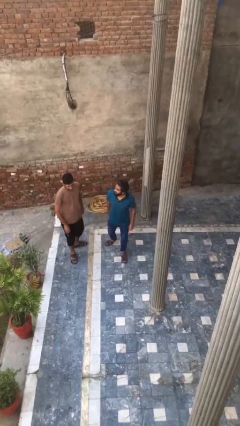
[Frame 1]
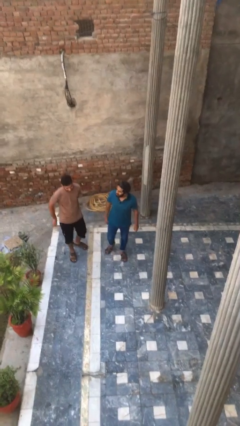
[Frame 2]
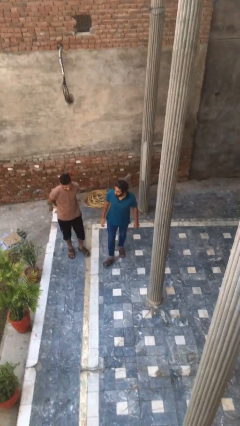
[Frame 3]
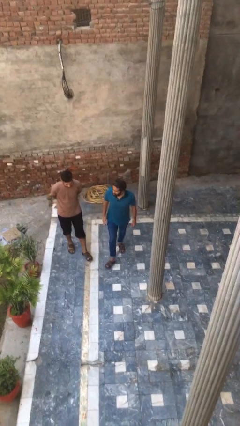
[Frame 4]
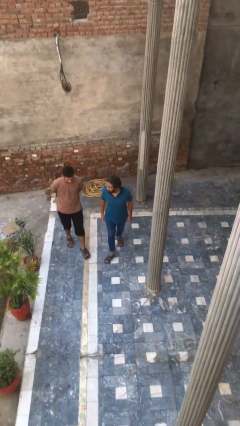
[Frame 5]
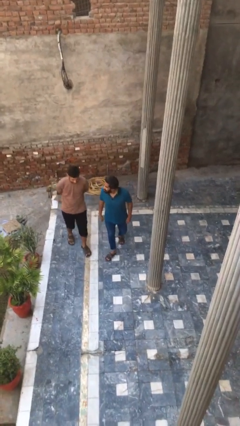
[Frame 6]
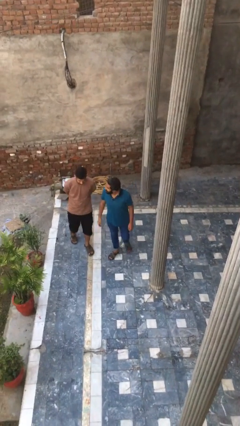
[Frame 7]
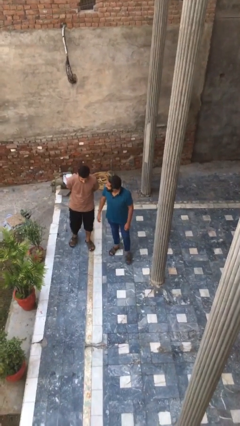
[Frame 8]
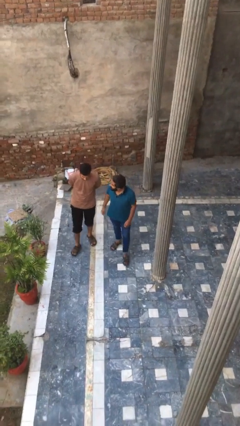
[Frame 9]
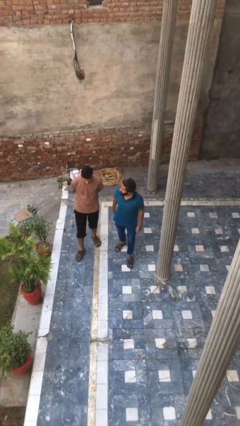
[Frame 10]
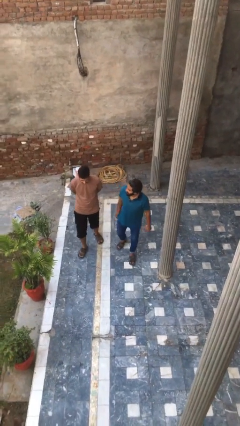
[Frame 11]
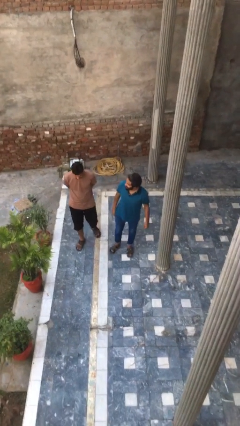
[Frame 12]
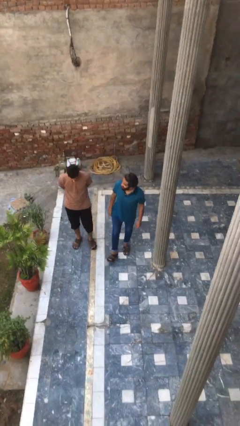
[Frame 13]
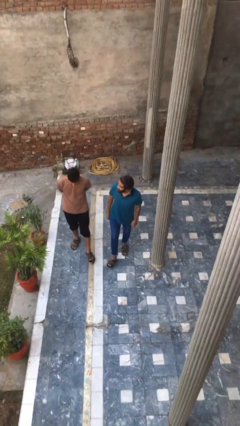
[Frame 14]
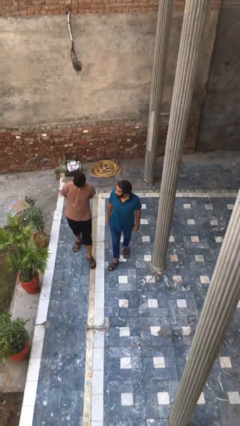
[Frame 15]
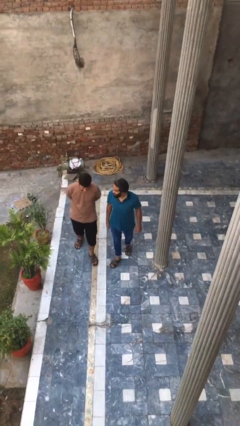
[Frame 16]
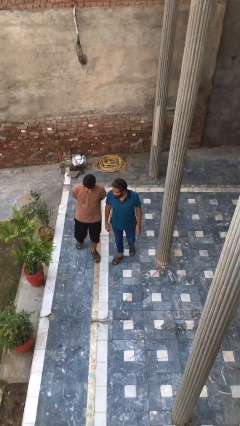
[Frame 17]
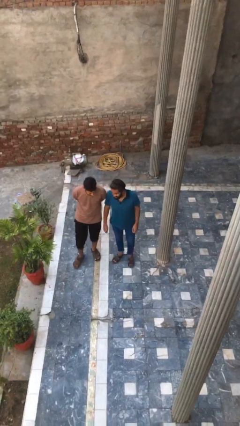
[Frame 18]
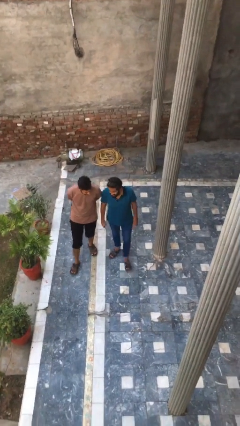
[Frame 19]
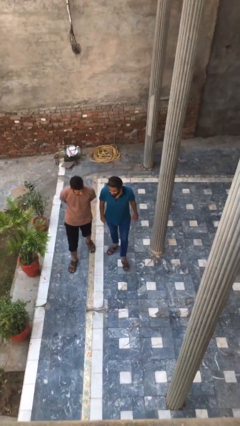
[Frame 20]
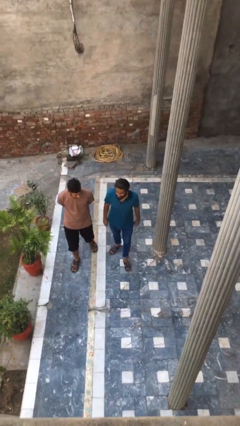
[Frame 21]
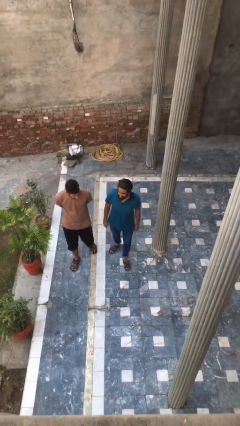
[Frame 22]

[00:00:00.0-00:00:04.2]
person talks to person

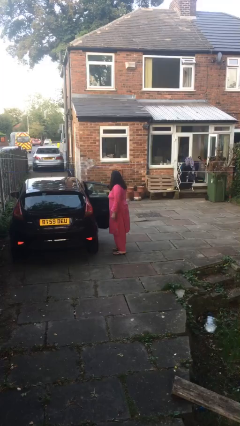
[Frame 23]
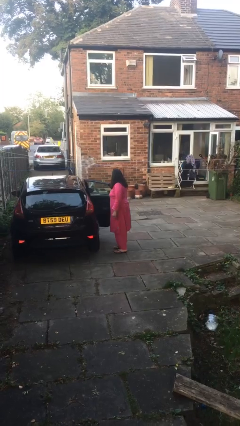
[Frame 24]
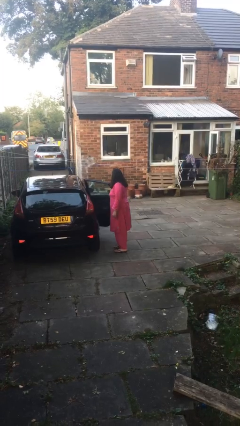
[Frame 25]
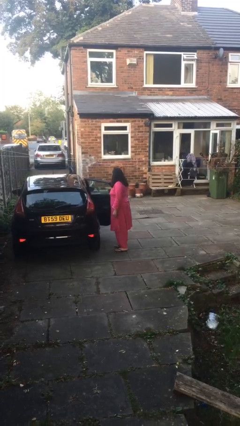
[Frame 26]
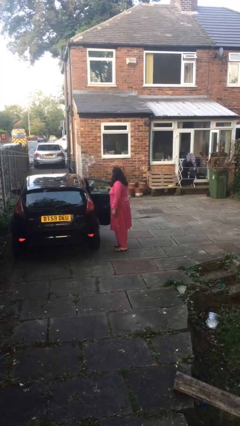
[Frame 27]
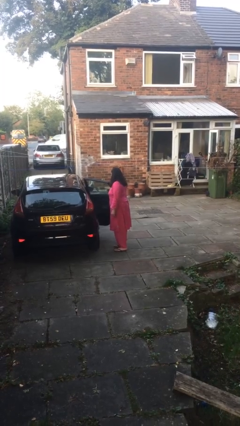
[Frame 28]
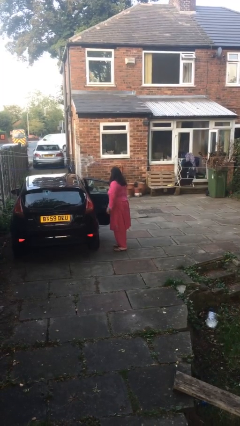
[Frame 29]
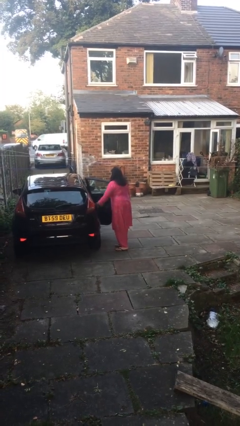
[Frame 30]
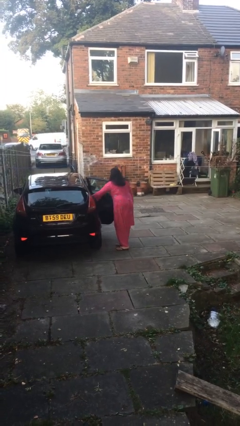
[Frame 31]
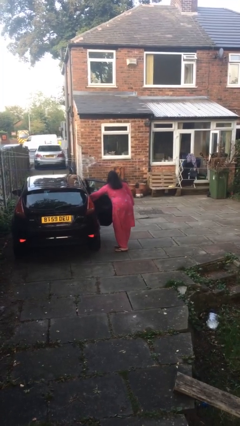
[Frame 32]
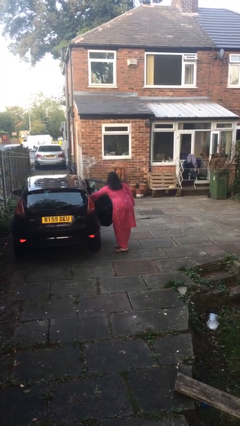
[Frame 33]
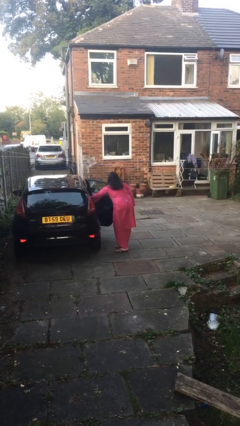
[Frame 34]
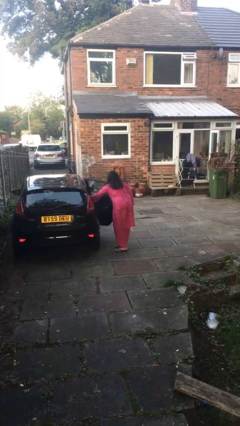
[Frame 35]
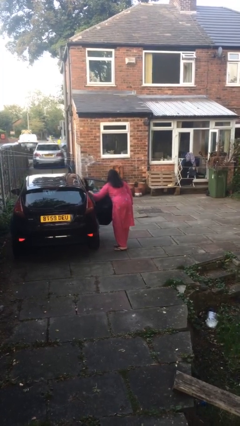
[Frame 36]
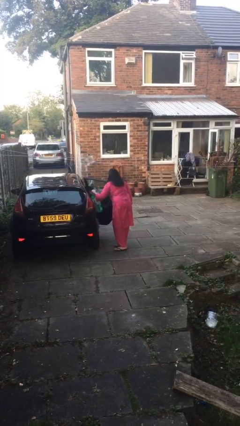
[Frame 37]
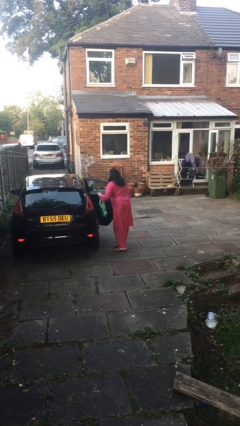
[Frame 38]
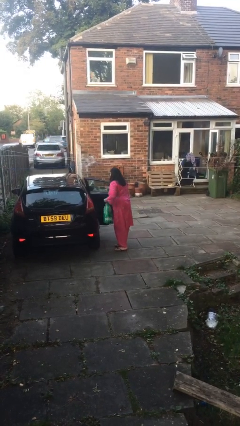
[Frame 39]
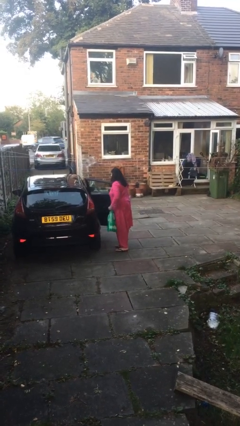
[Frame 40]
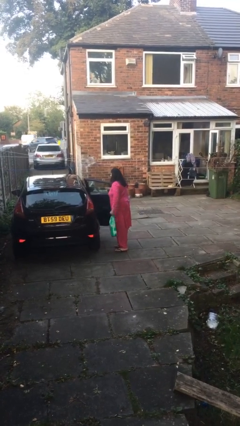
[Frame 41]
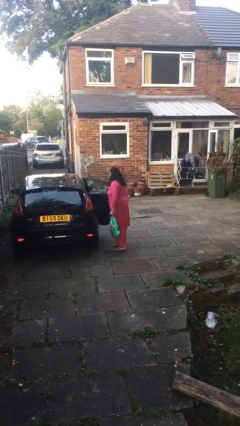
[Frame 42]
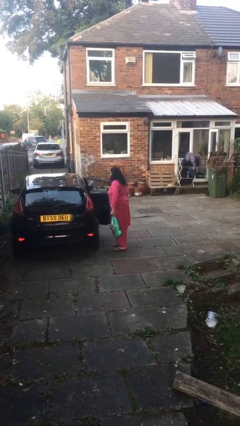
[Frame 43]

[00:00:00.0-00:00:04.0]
person unloads car

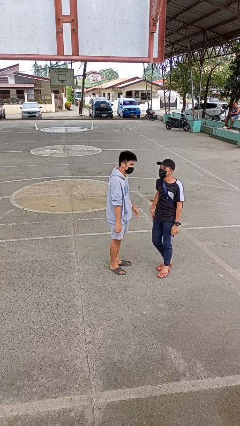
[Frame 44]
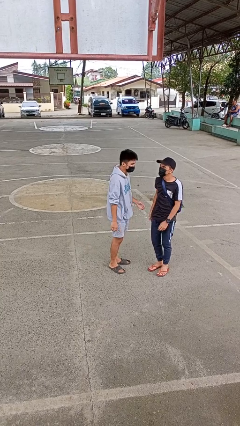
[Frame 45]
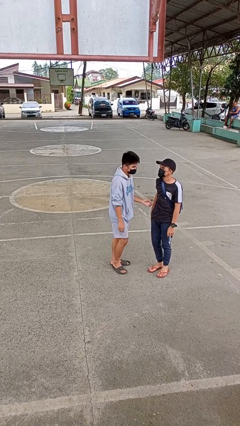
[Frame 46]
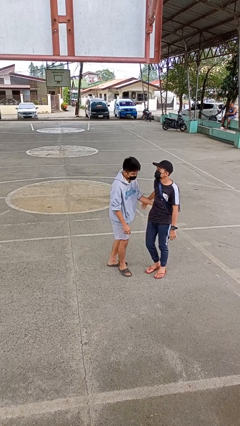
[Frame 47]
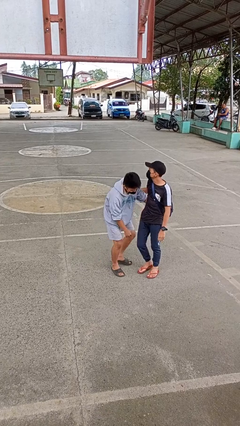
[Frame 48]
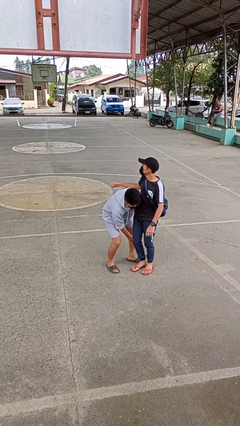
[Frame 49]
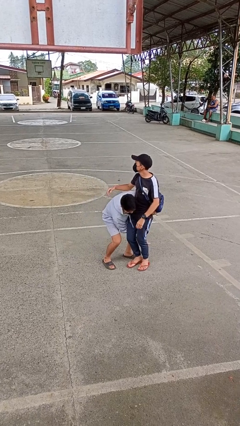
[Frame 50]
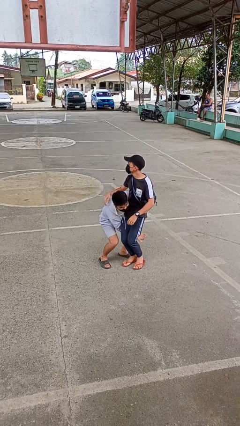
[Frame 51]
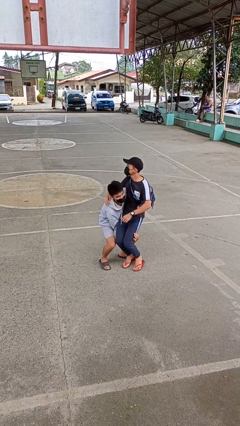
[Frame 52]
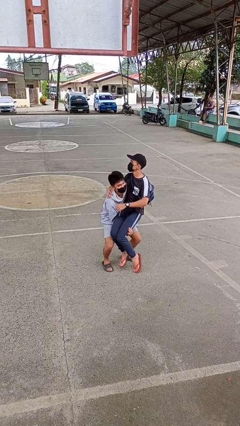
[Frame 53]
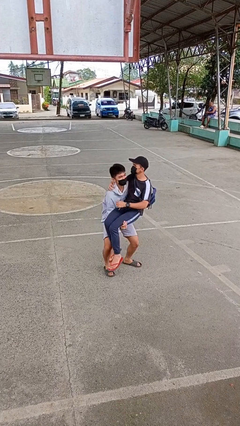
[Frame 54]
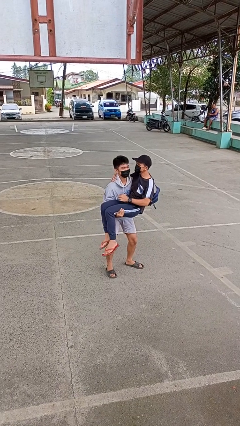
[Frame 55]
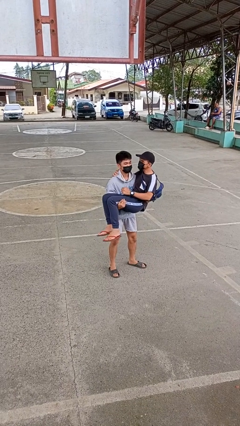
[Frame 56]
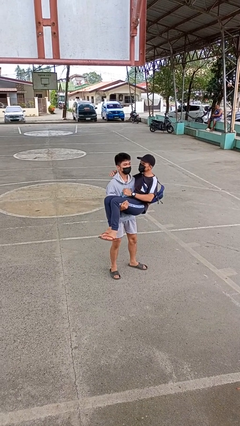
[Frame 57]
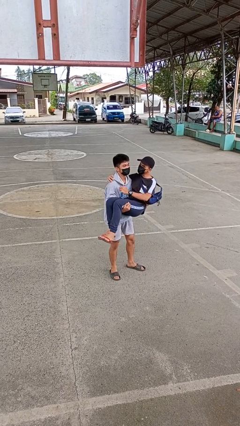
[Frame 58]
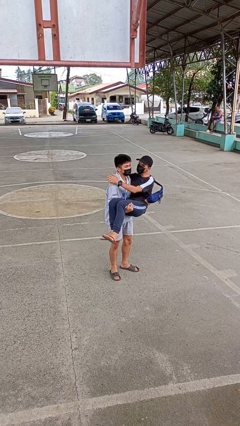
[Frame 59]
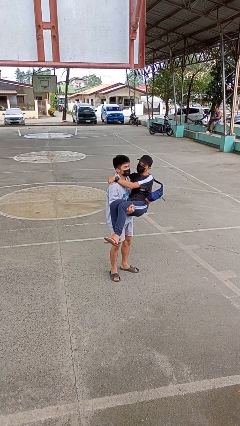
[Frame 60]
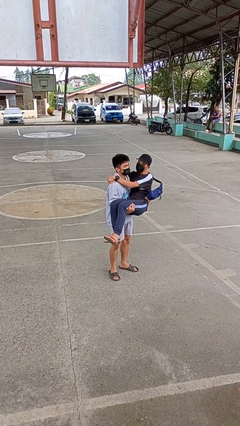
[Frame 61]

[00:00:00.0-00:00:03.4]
person picks up person

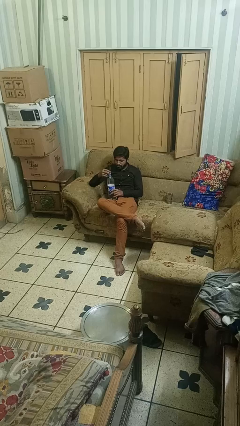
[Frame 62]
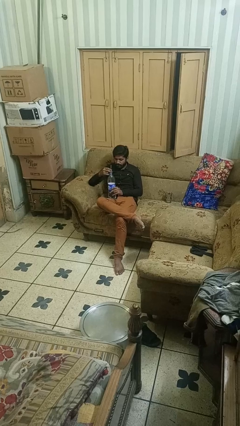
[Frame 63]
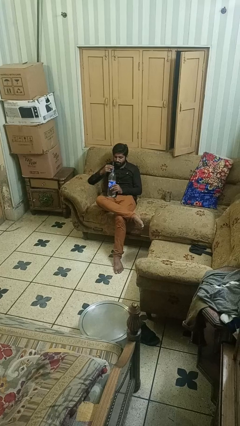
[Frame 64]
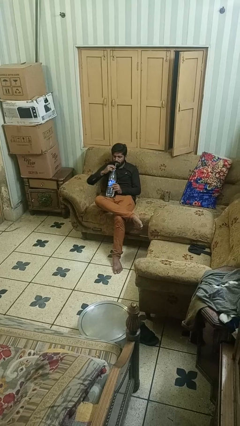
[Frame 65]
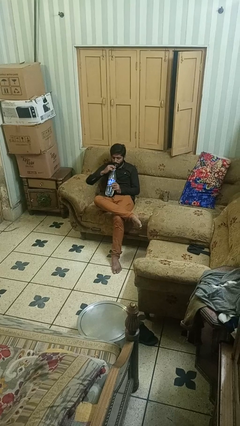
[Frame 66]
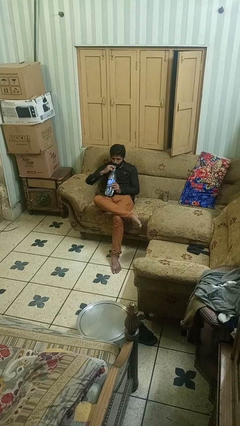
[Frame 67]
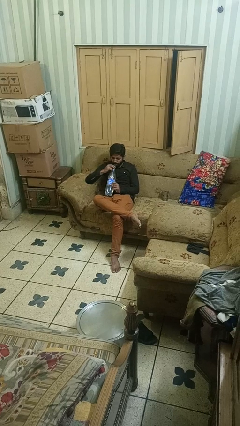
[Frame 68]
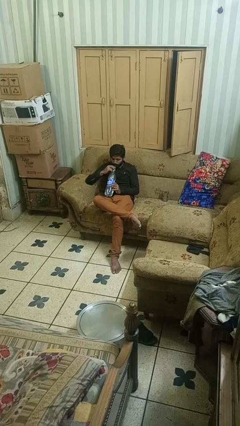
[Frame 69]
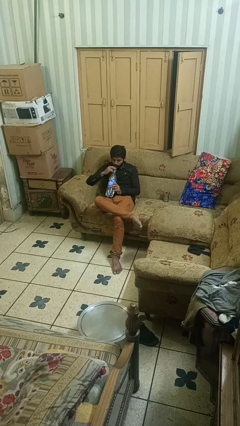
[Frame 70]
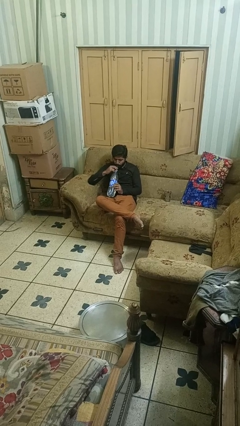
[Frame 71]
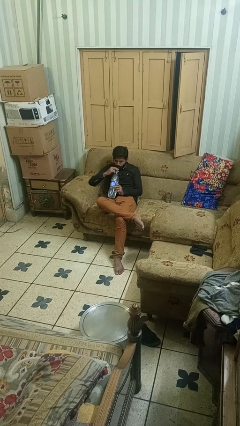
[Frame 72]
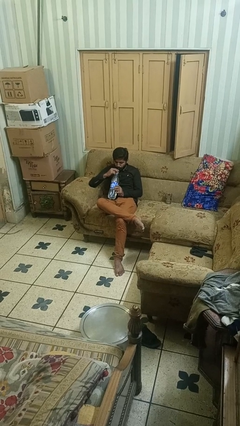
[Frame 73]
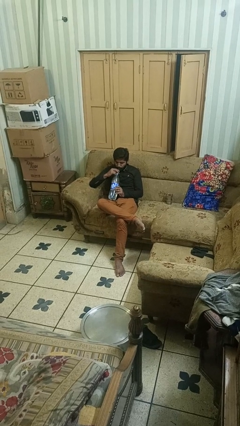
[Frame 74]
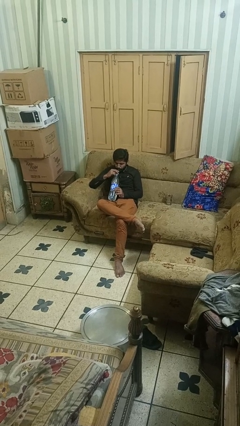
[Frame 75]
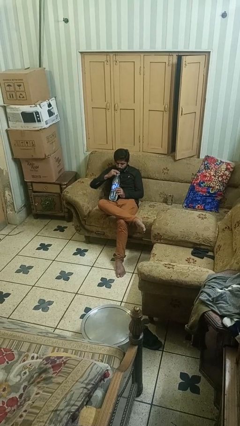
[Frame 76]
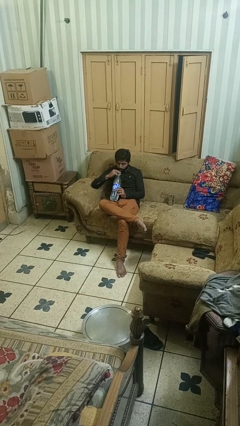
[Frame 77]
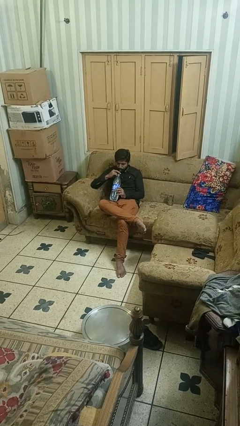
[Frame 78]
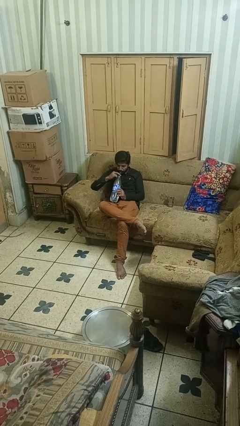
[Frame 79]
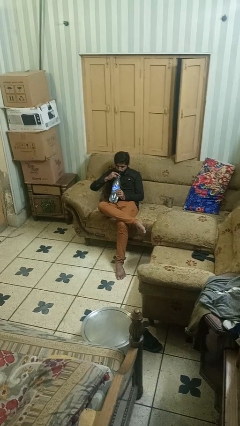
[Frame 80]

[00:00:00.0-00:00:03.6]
person drinks from straw

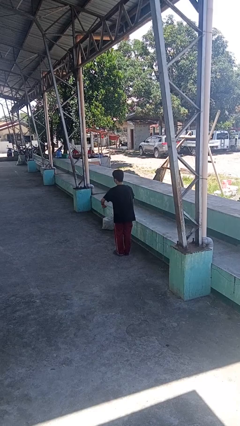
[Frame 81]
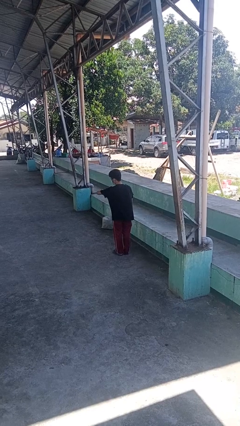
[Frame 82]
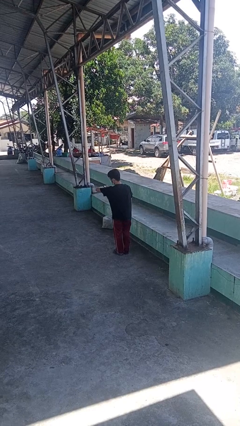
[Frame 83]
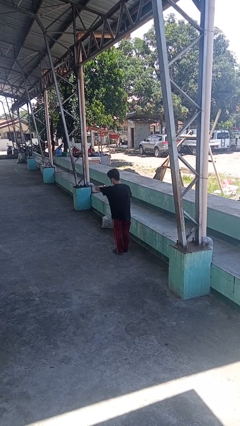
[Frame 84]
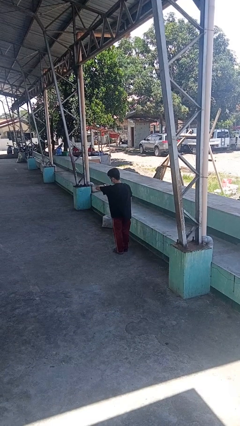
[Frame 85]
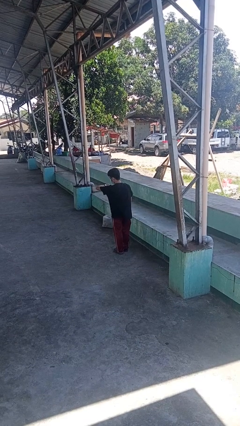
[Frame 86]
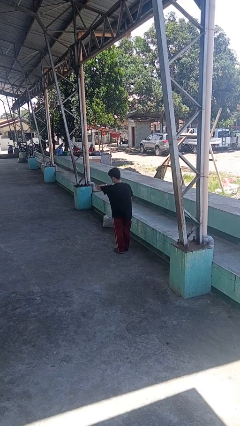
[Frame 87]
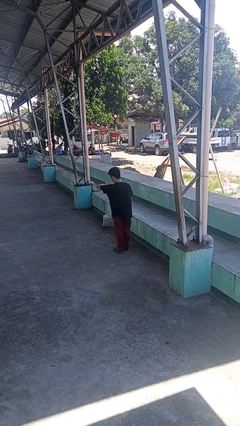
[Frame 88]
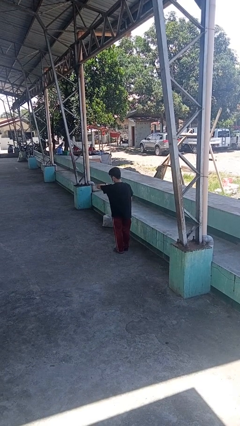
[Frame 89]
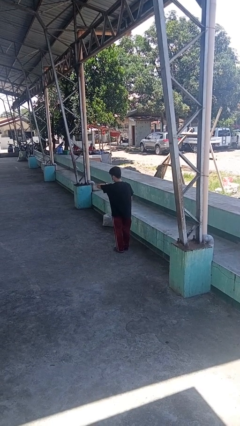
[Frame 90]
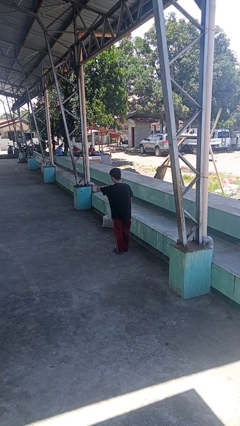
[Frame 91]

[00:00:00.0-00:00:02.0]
person looks at wristwatch

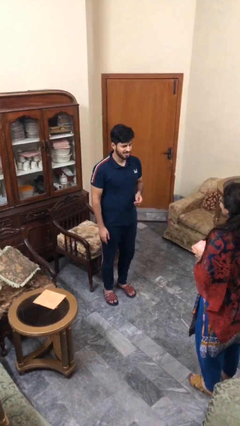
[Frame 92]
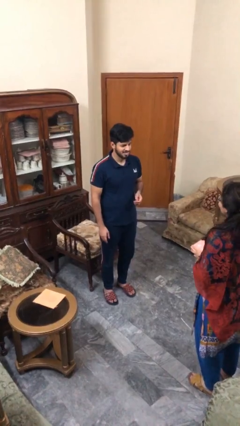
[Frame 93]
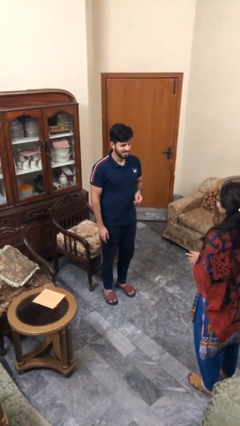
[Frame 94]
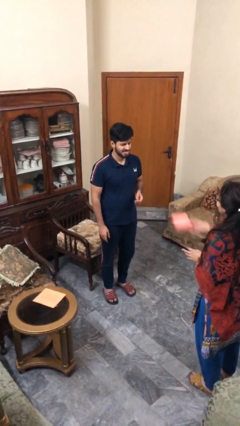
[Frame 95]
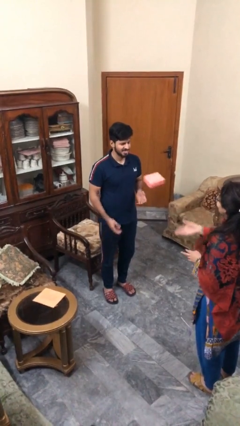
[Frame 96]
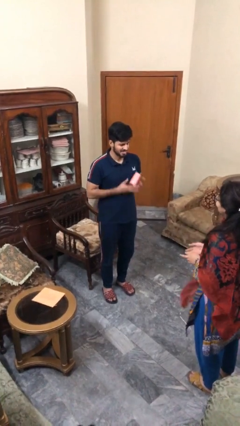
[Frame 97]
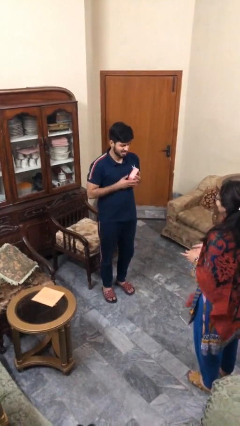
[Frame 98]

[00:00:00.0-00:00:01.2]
person catches object from person
